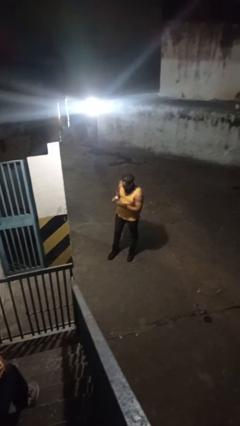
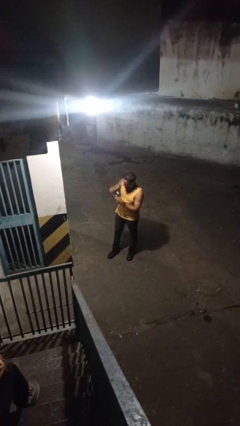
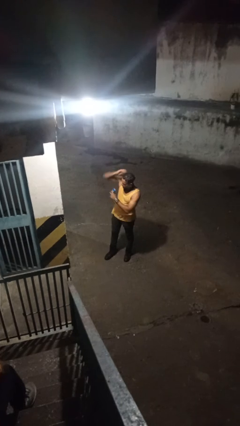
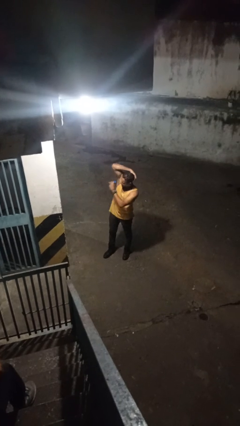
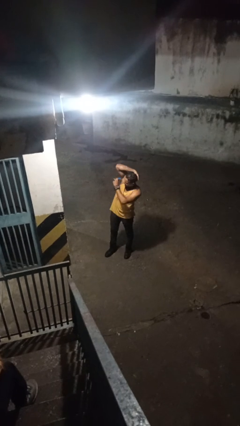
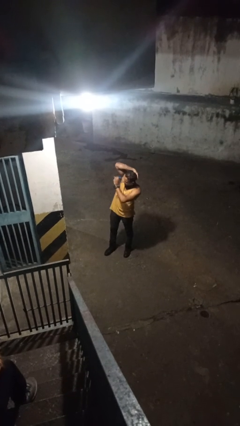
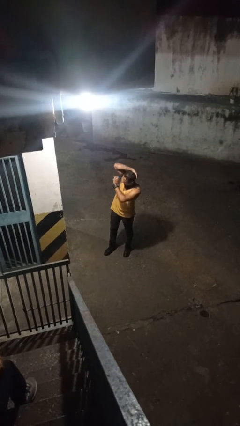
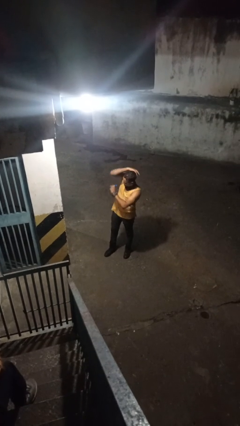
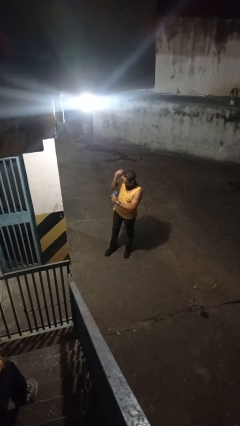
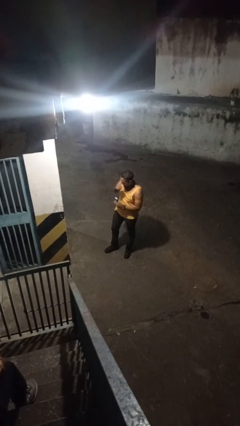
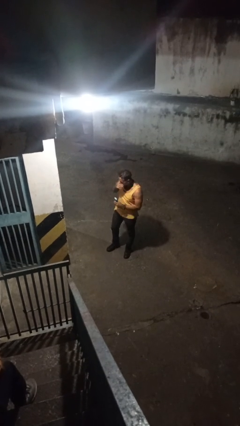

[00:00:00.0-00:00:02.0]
person applies deodorant

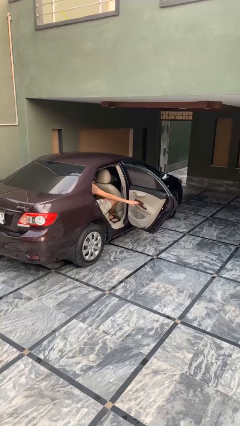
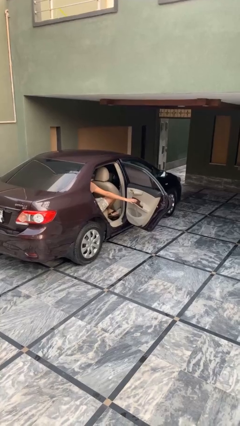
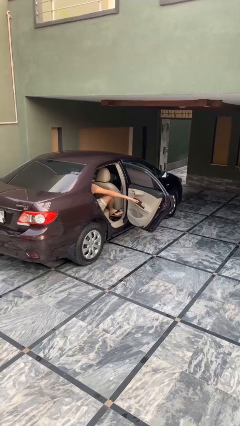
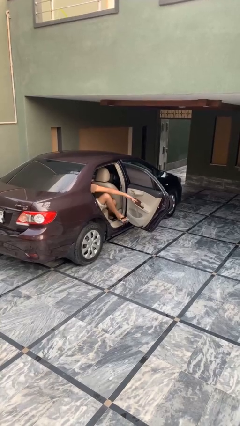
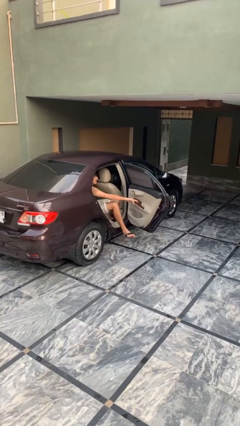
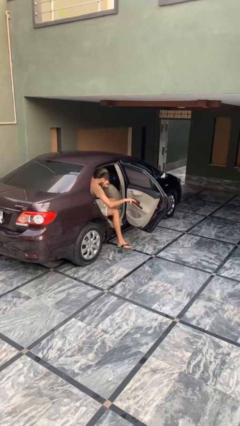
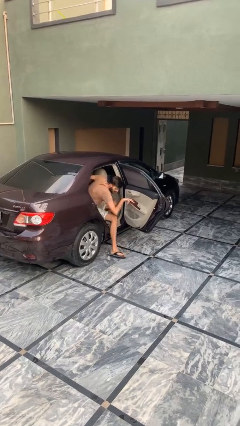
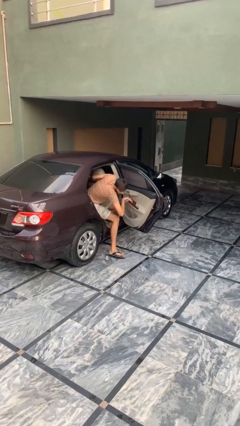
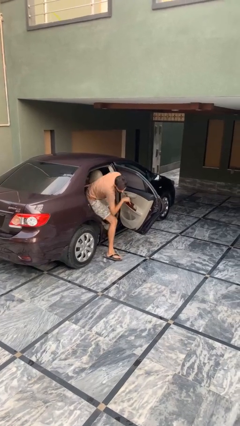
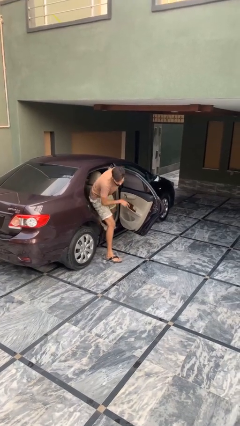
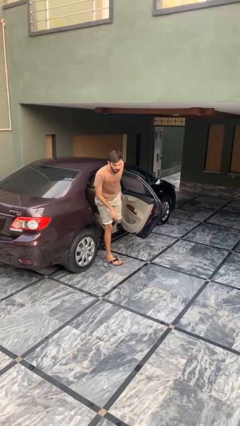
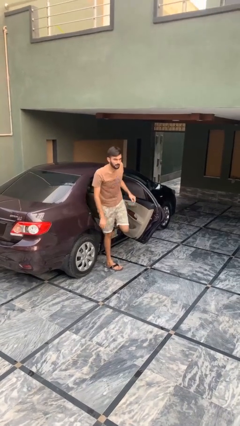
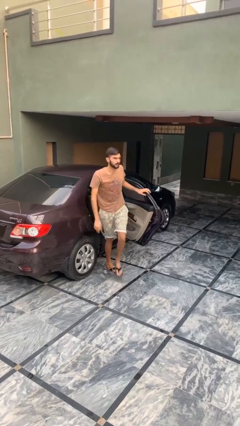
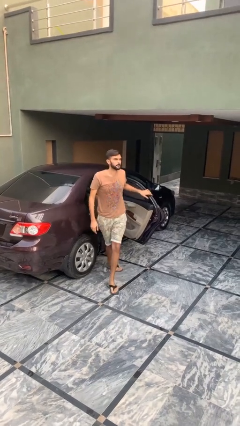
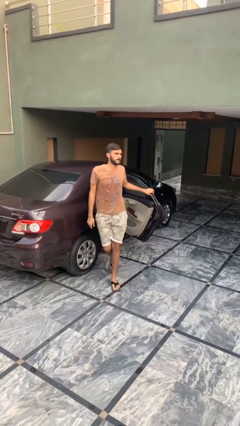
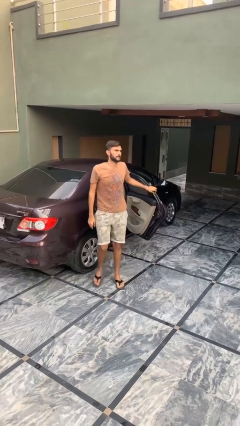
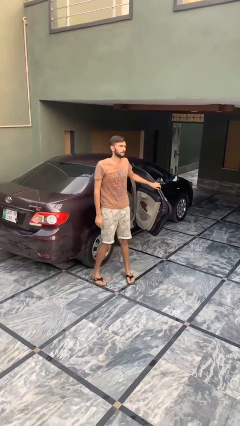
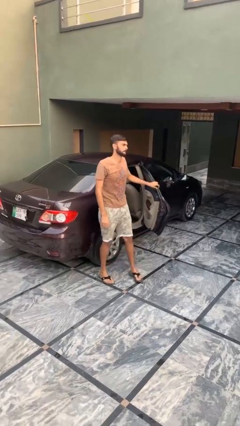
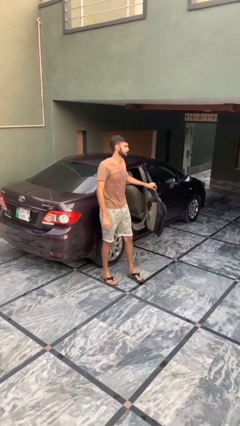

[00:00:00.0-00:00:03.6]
person exits car

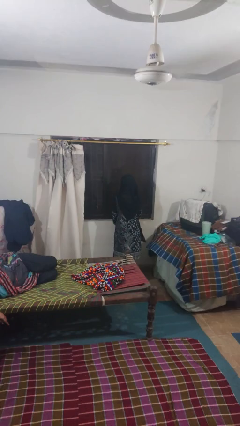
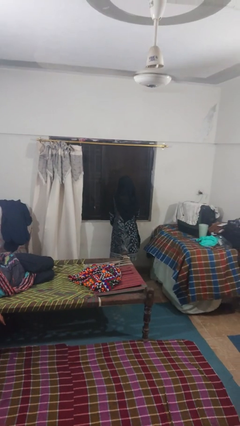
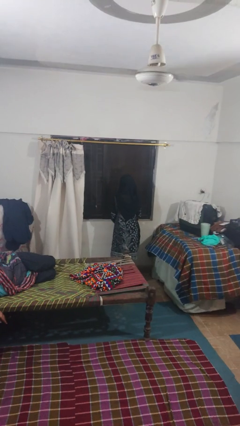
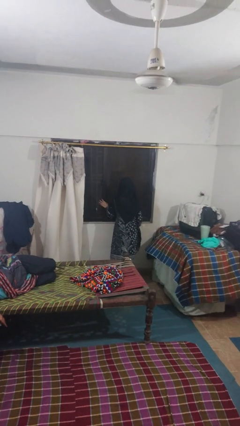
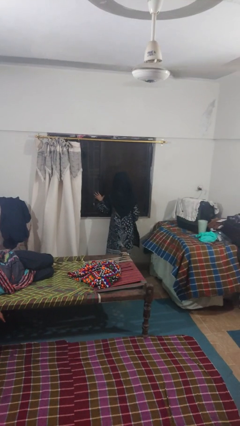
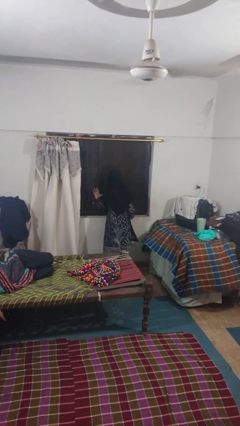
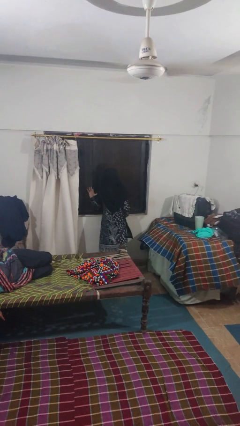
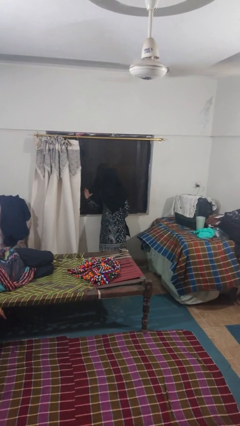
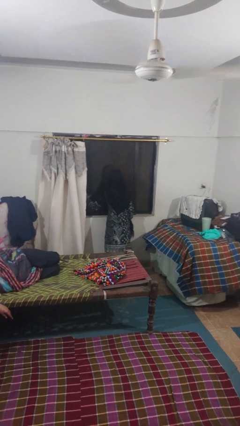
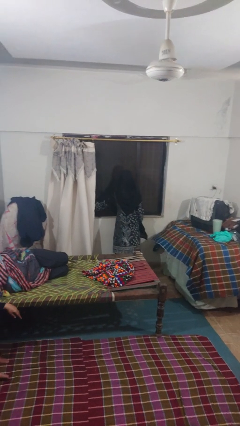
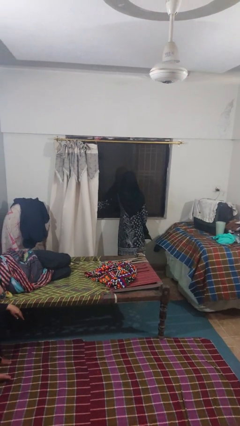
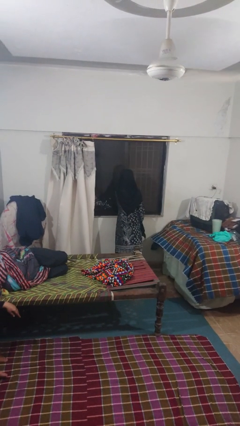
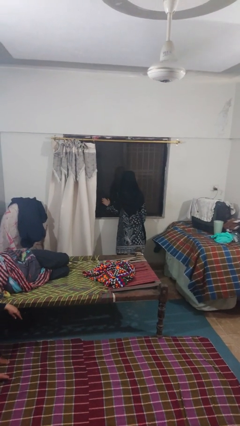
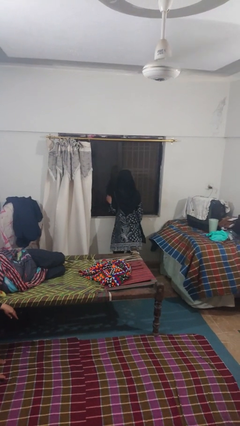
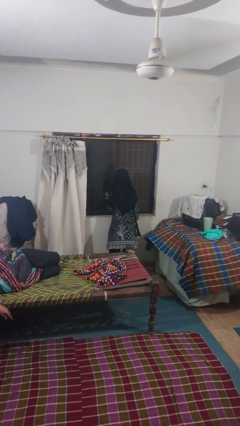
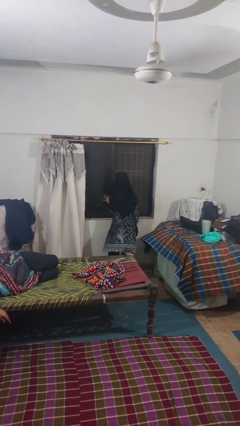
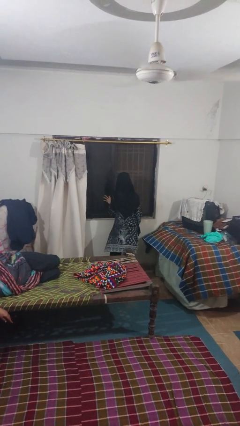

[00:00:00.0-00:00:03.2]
person opens sliding door

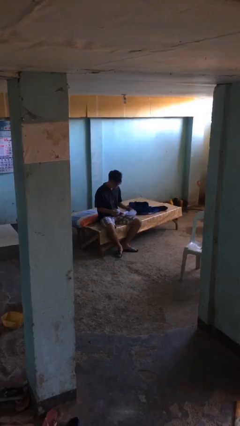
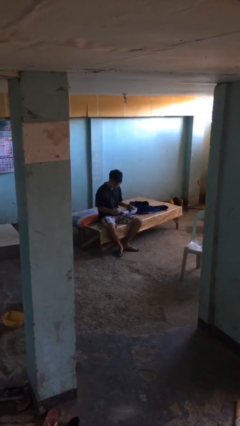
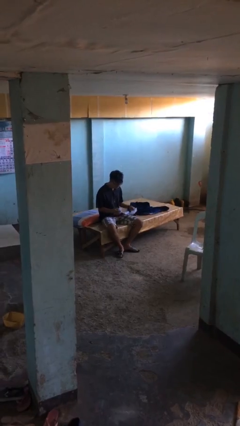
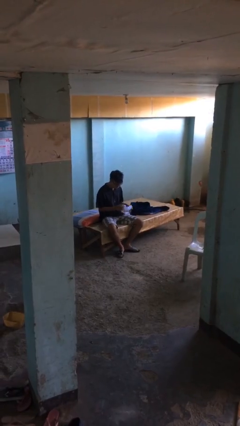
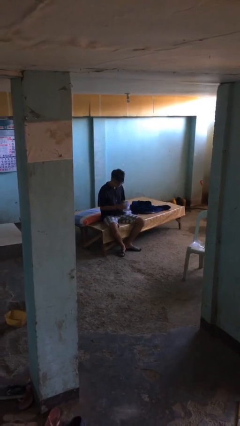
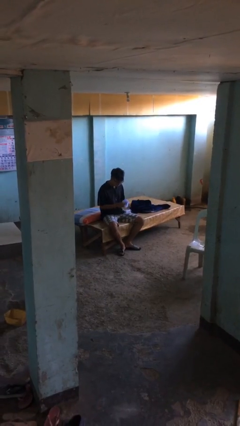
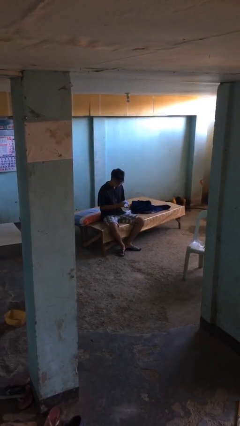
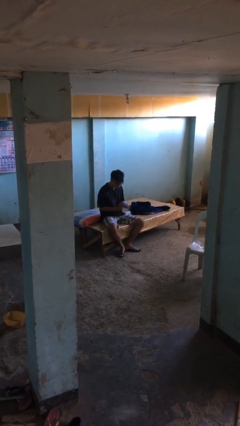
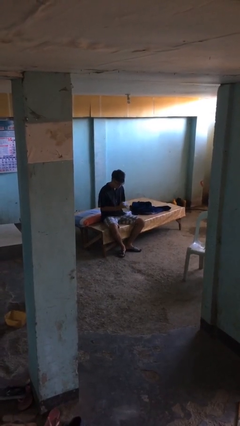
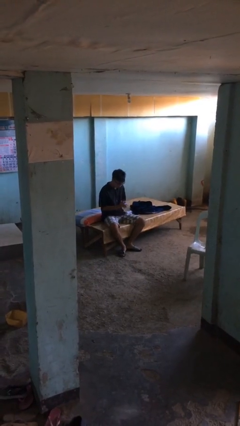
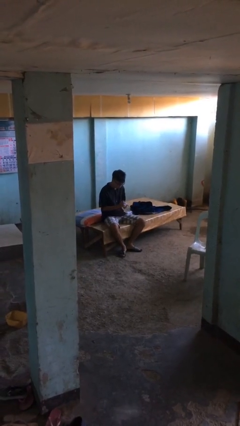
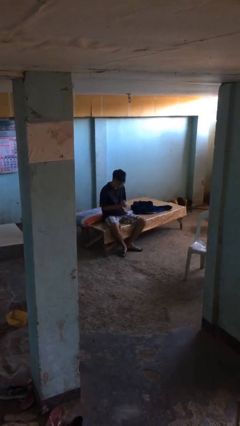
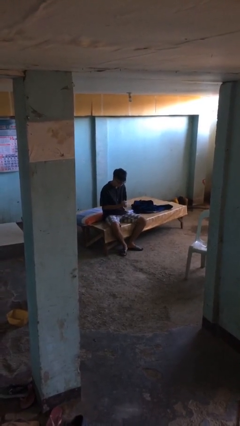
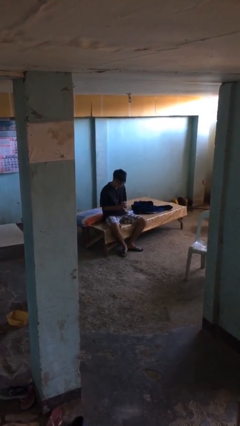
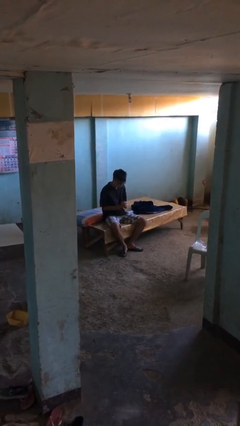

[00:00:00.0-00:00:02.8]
person crumples paper

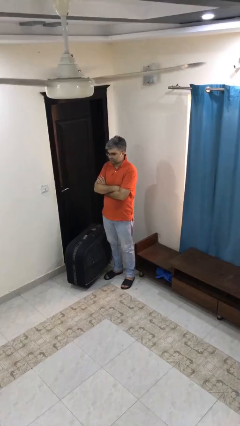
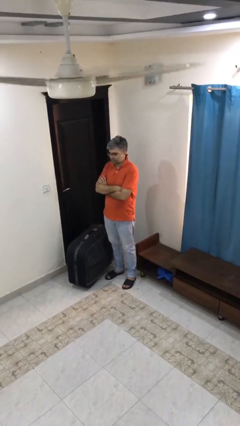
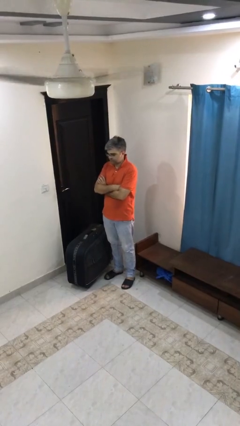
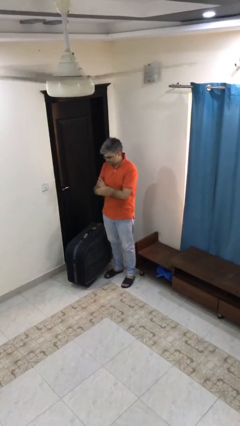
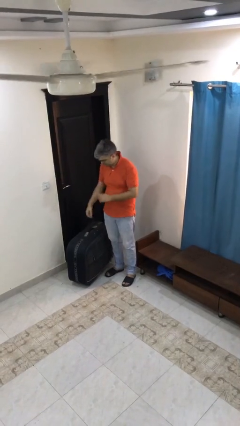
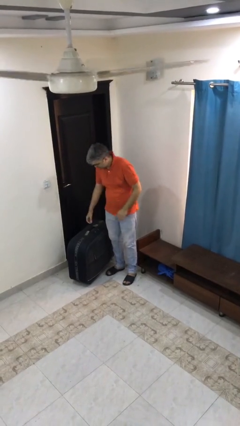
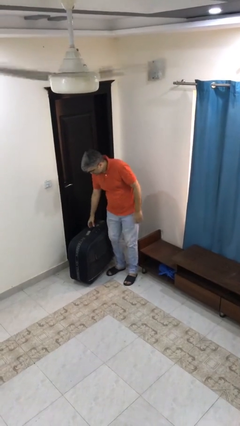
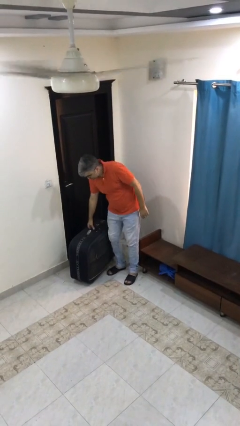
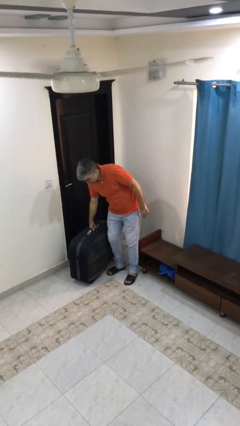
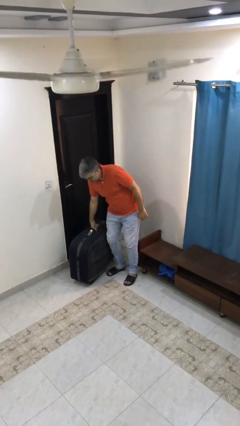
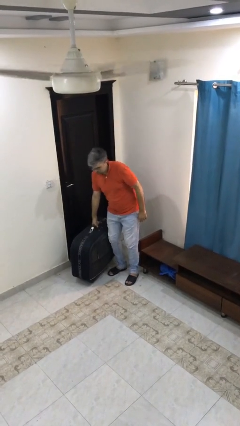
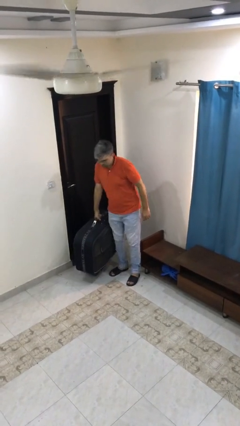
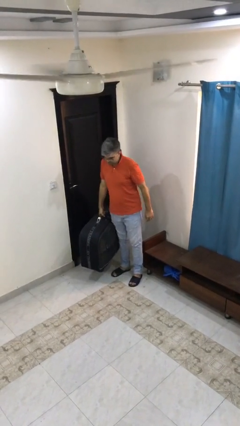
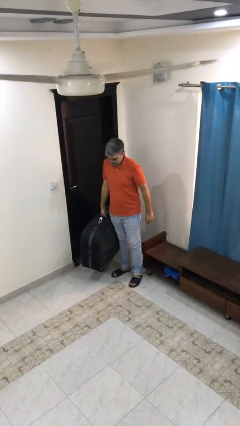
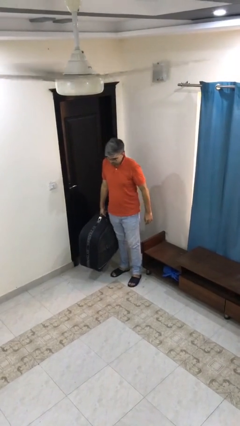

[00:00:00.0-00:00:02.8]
person picks up object from floor

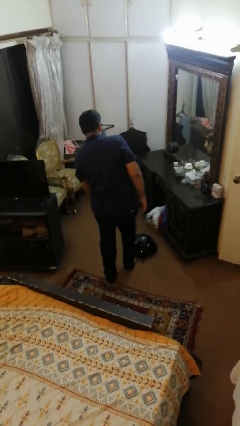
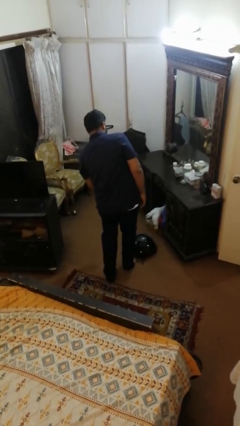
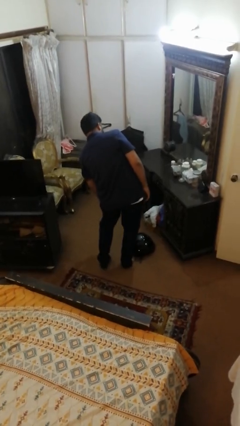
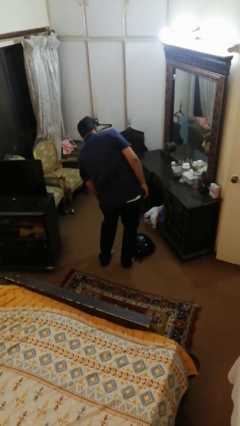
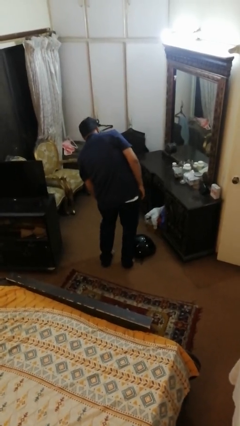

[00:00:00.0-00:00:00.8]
person trips on object on floor

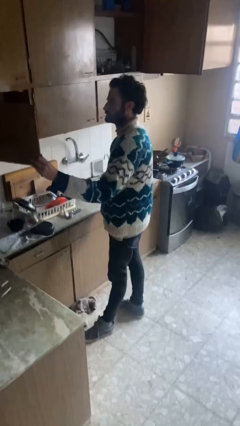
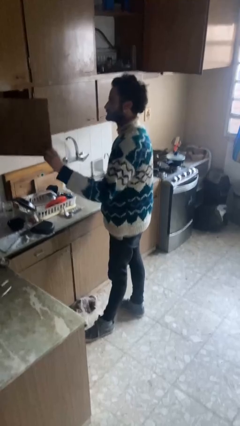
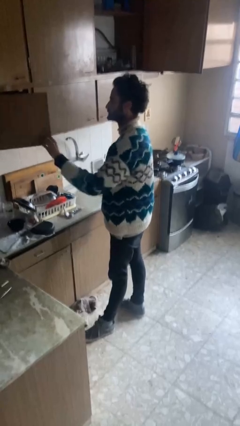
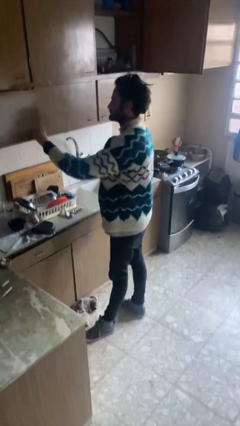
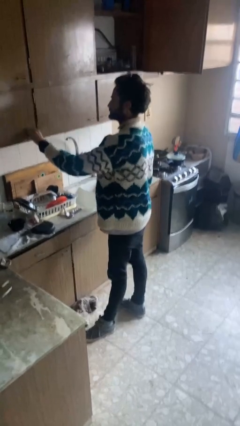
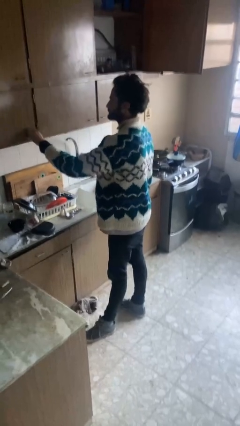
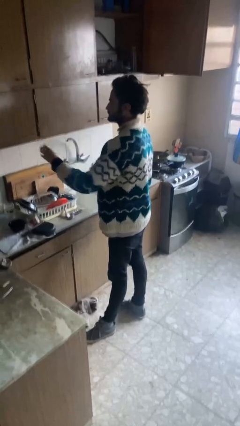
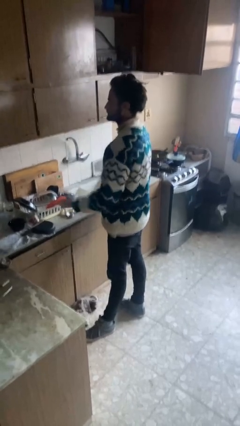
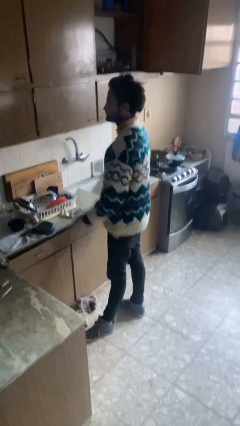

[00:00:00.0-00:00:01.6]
person closes cabinet

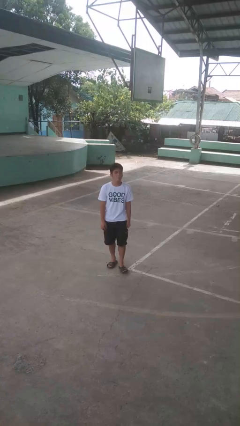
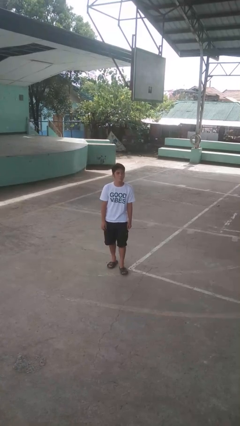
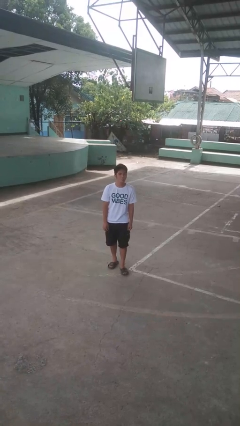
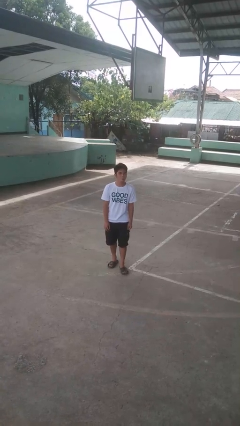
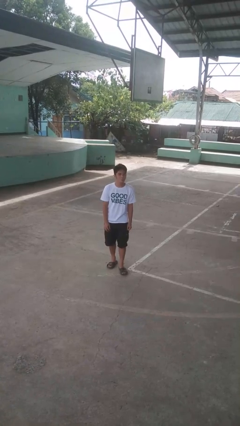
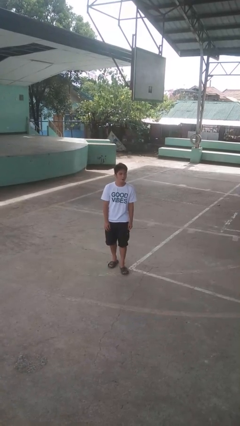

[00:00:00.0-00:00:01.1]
person sticks out tongue
